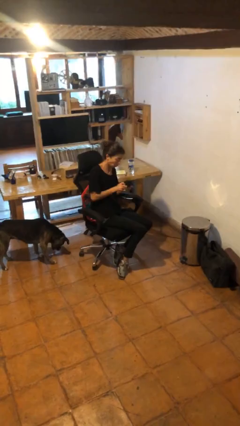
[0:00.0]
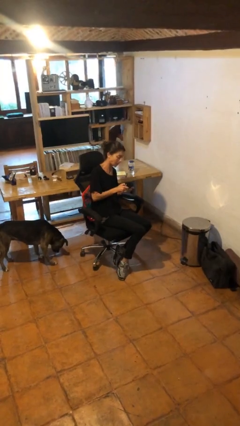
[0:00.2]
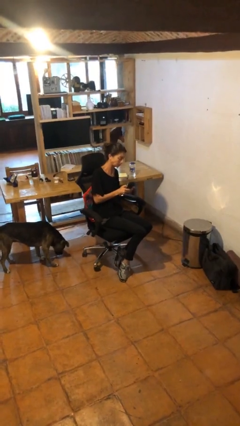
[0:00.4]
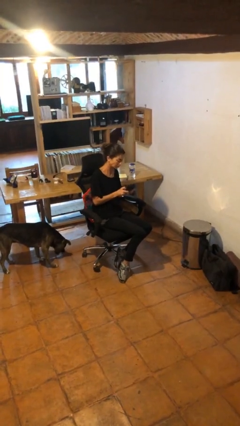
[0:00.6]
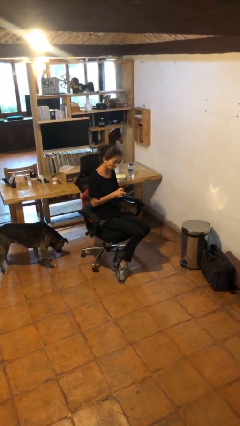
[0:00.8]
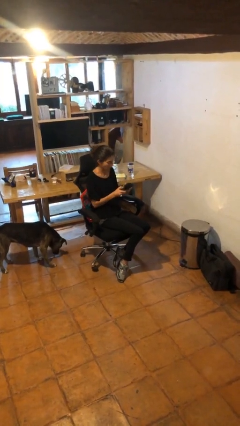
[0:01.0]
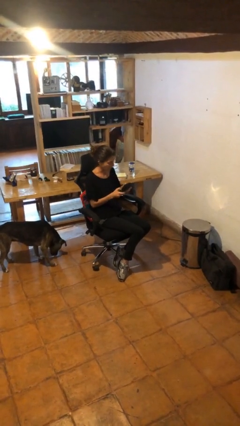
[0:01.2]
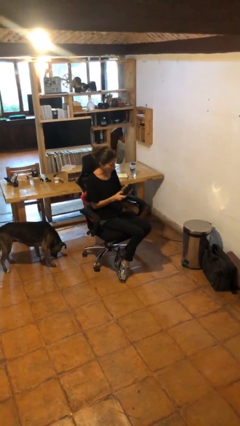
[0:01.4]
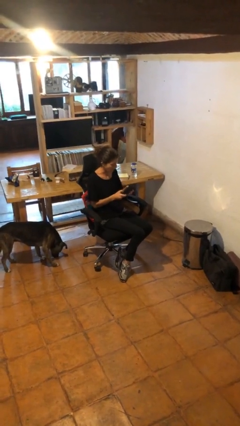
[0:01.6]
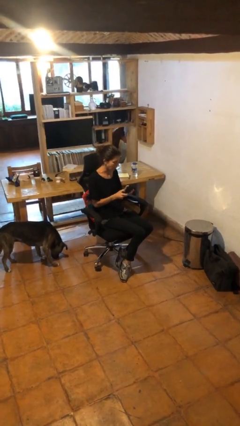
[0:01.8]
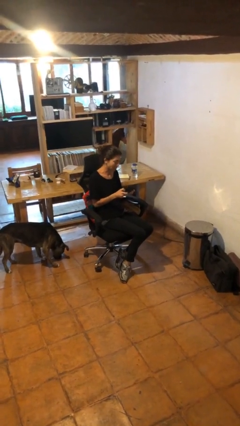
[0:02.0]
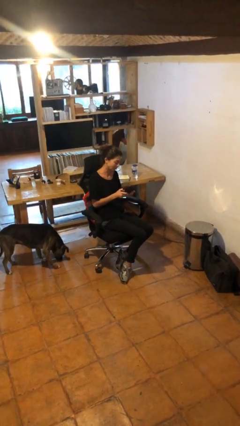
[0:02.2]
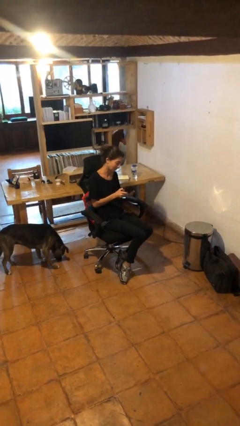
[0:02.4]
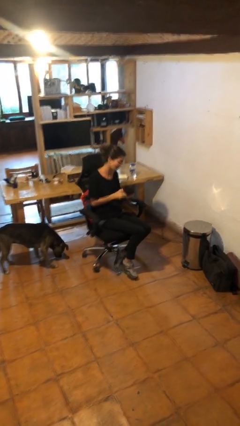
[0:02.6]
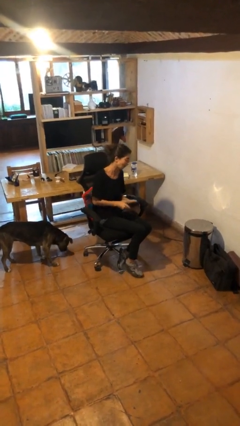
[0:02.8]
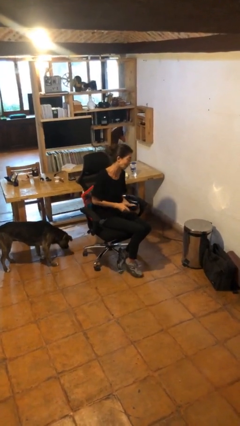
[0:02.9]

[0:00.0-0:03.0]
person interacts with handheld game

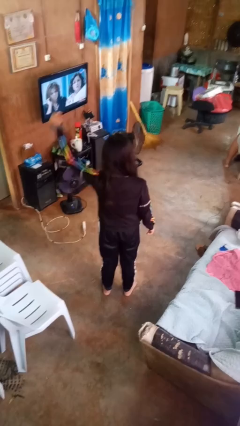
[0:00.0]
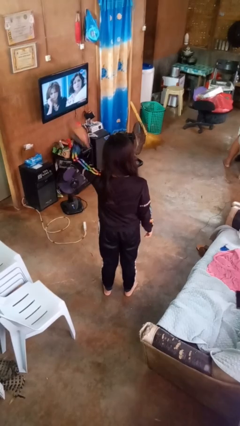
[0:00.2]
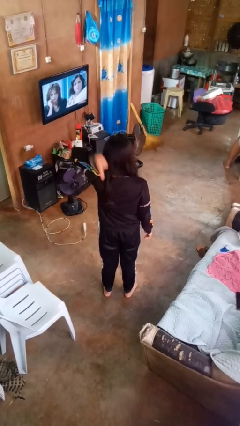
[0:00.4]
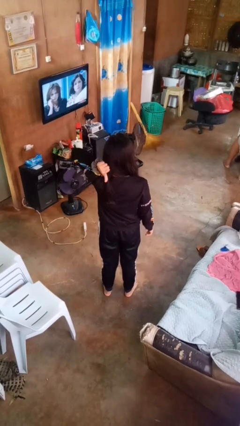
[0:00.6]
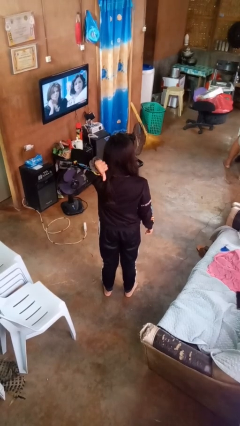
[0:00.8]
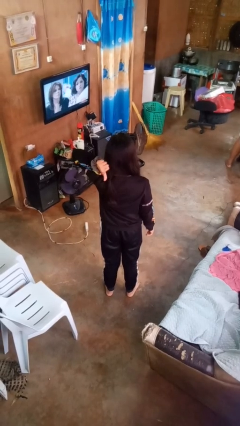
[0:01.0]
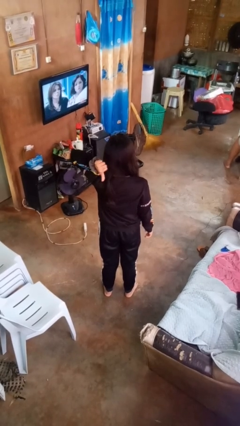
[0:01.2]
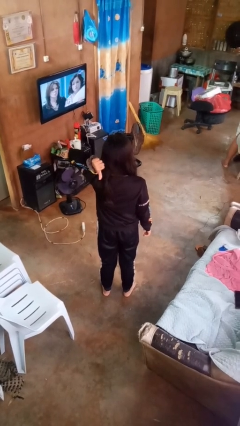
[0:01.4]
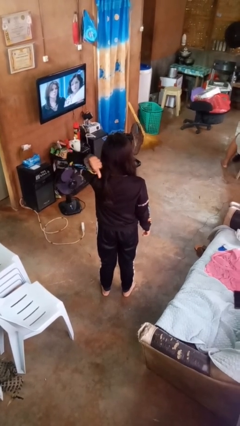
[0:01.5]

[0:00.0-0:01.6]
person gestures behind me

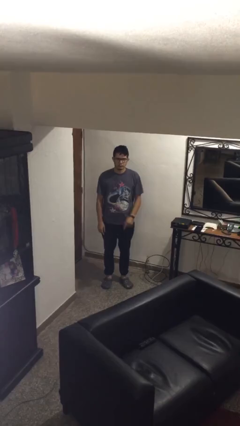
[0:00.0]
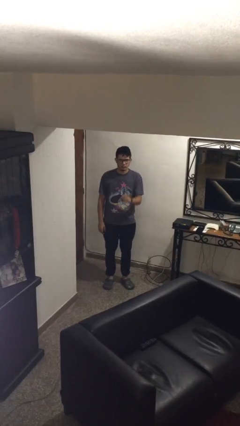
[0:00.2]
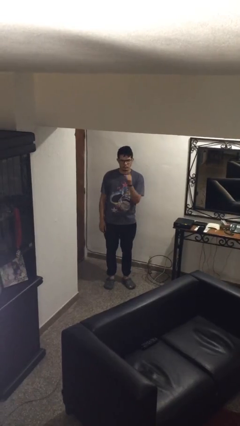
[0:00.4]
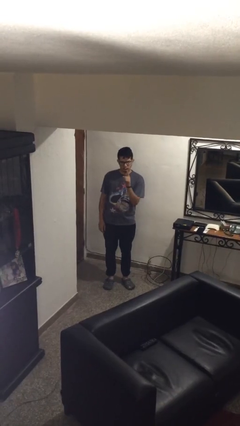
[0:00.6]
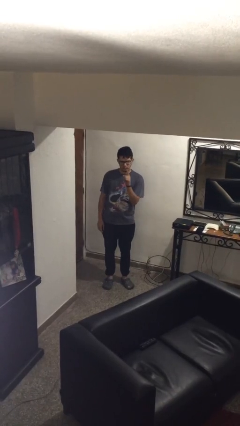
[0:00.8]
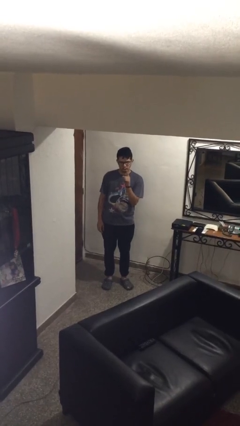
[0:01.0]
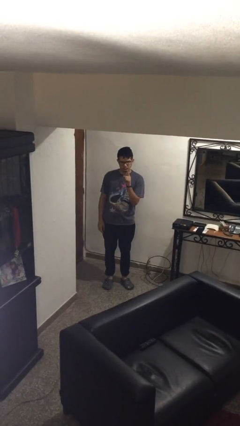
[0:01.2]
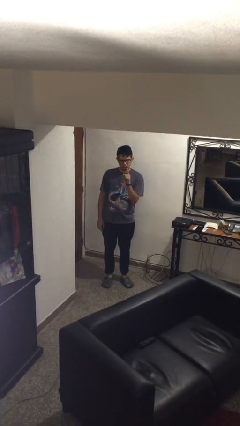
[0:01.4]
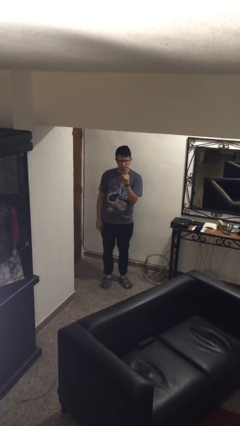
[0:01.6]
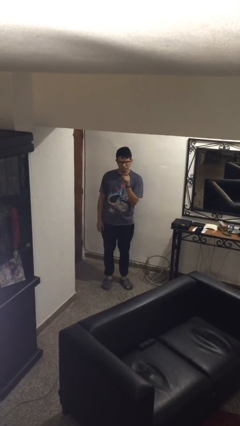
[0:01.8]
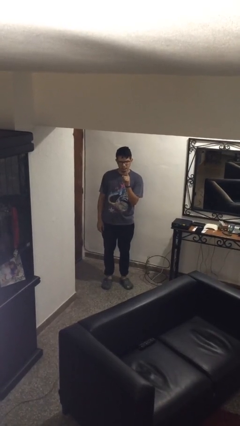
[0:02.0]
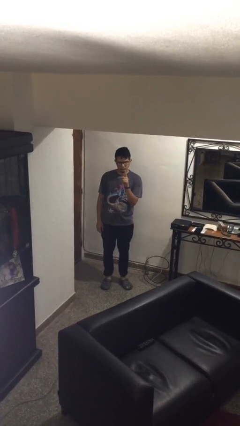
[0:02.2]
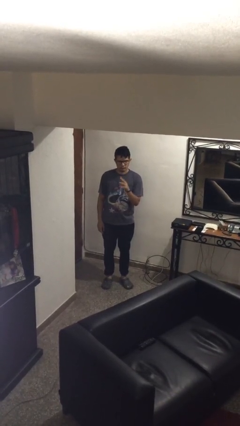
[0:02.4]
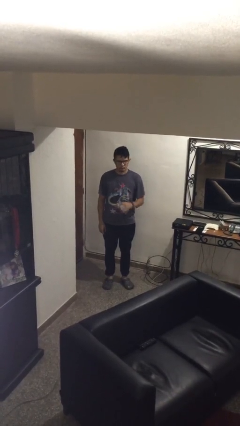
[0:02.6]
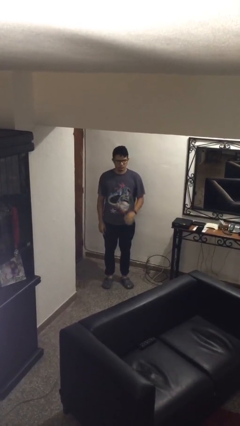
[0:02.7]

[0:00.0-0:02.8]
person gestures number one

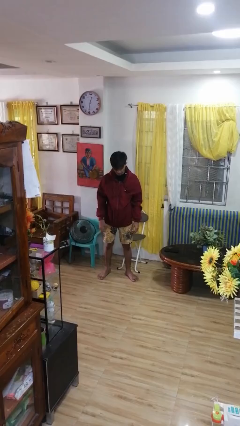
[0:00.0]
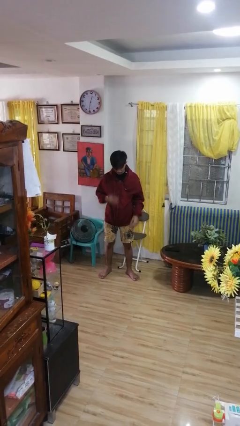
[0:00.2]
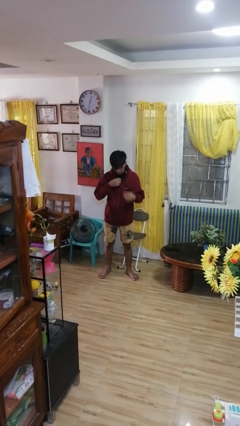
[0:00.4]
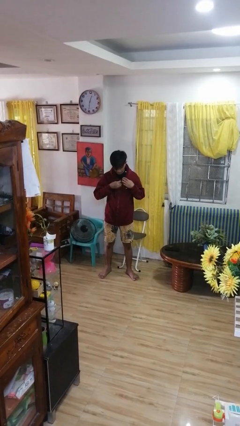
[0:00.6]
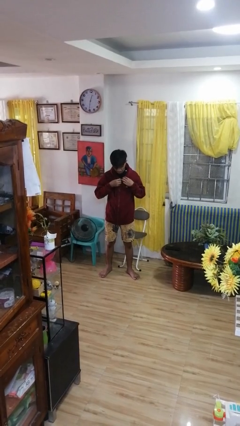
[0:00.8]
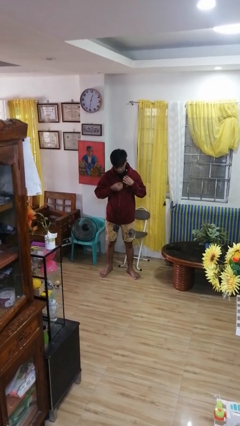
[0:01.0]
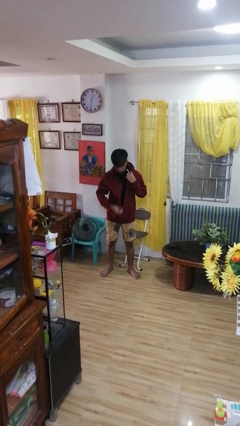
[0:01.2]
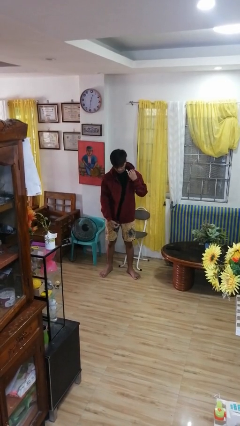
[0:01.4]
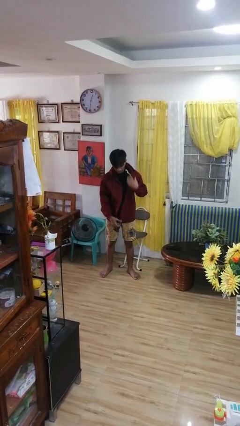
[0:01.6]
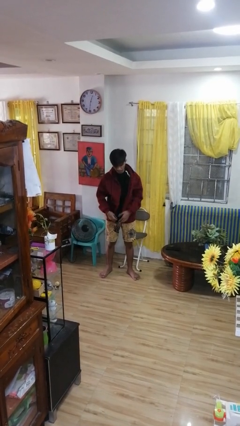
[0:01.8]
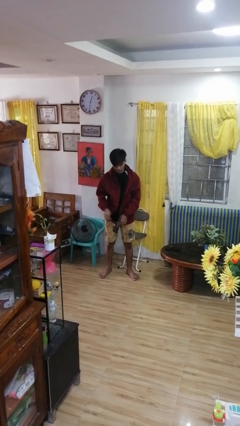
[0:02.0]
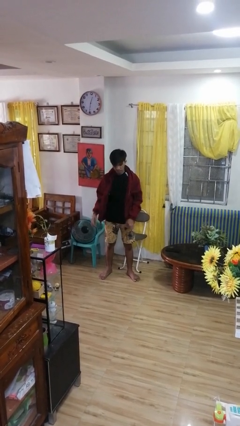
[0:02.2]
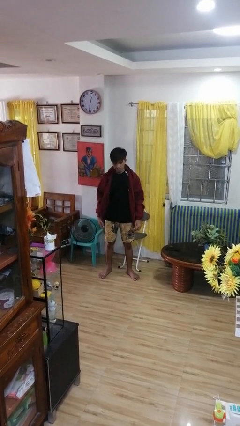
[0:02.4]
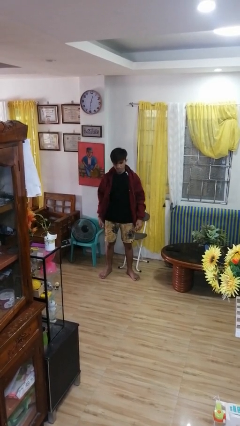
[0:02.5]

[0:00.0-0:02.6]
person unzips jacket

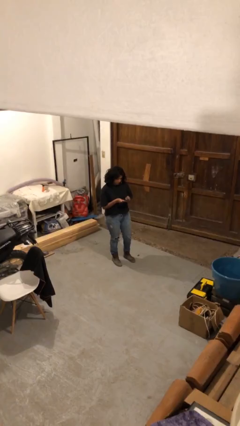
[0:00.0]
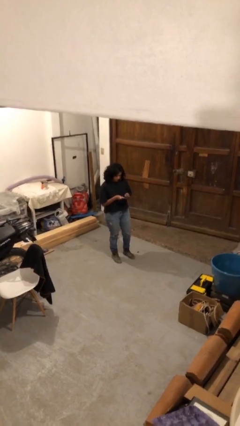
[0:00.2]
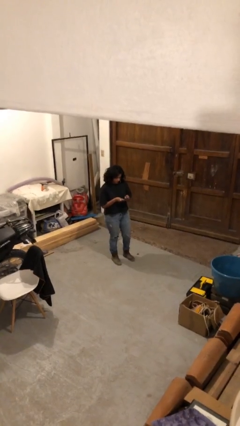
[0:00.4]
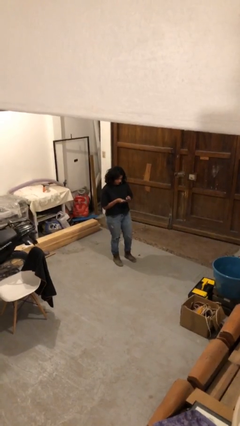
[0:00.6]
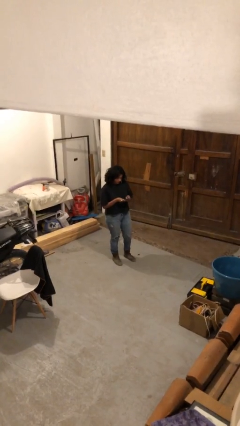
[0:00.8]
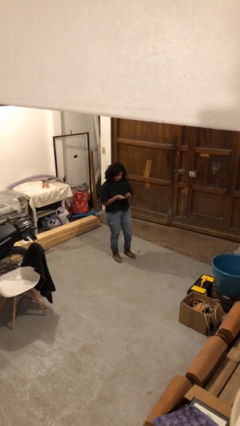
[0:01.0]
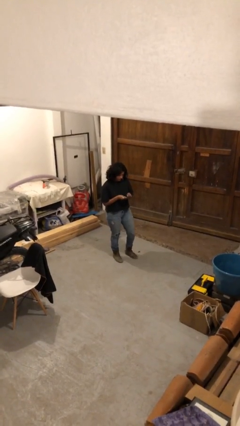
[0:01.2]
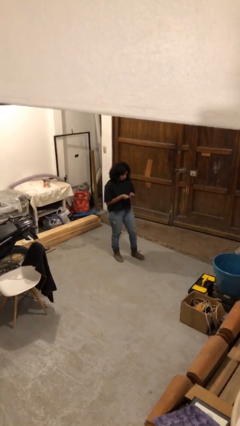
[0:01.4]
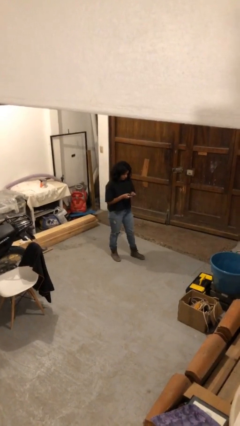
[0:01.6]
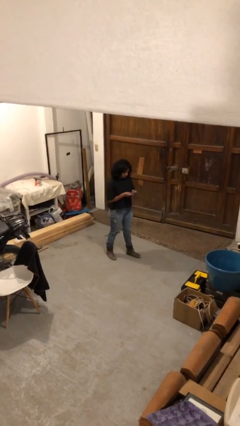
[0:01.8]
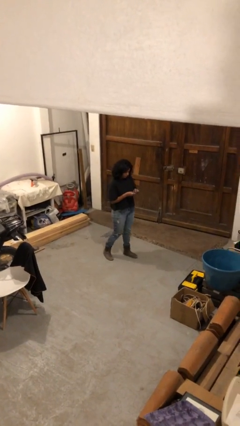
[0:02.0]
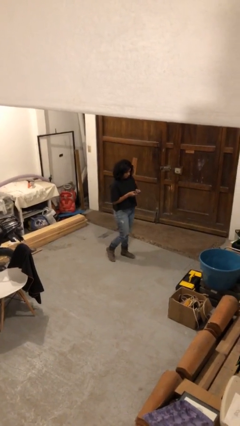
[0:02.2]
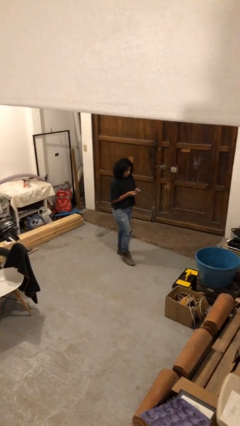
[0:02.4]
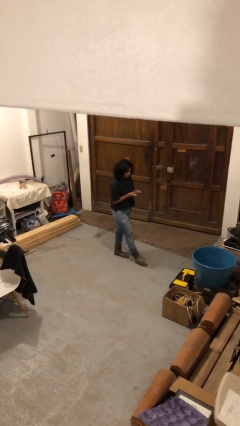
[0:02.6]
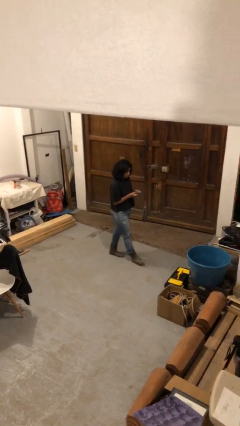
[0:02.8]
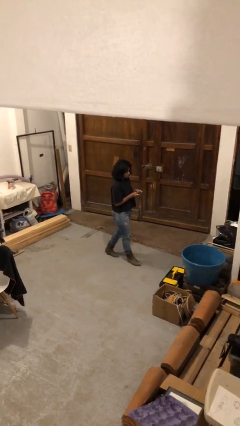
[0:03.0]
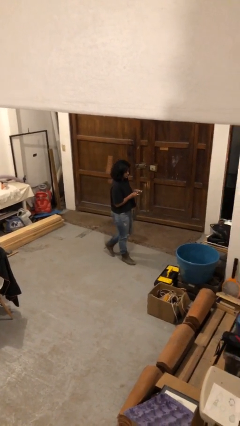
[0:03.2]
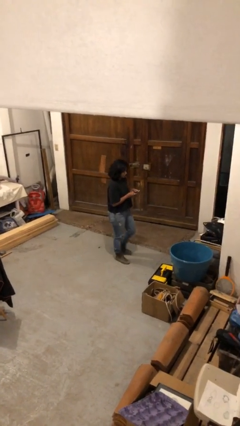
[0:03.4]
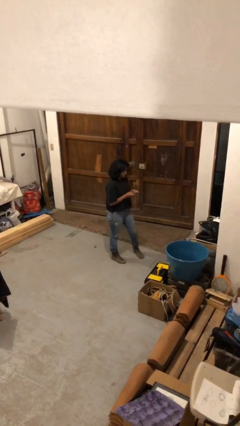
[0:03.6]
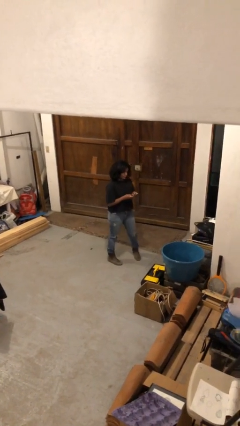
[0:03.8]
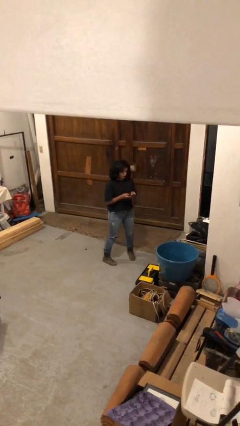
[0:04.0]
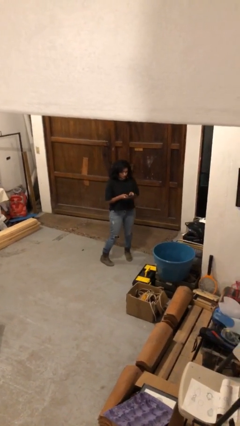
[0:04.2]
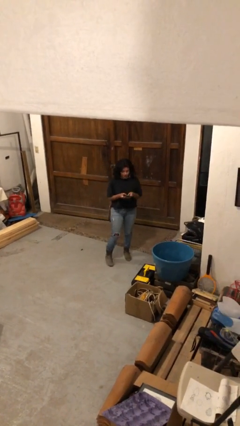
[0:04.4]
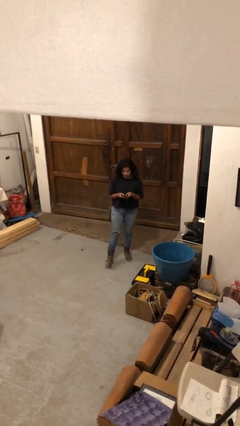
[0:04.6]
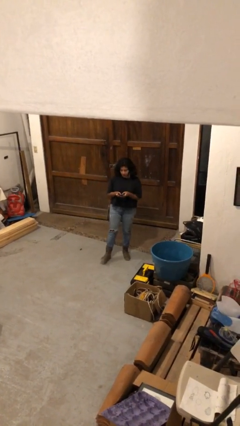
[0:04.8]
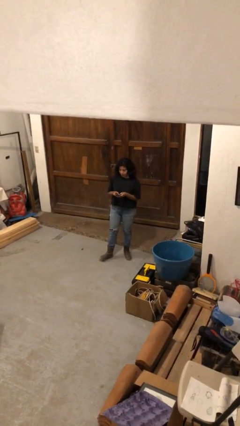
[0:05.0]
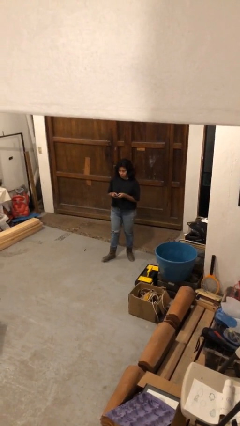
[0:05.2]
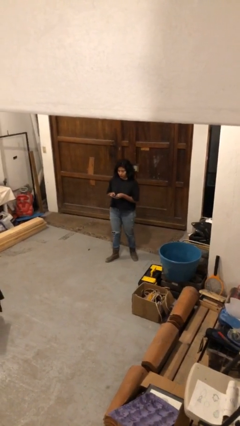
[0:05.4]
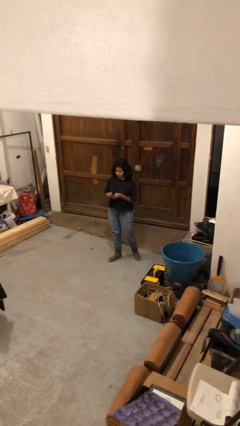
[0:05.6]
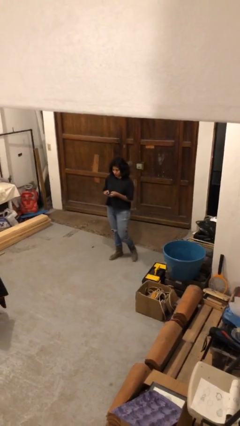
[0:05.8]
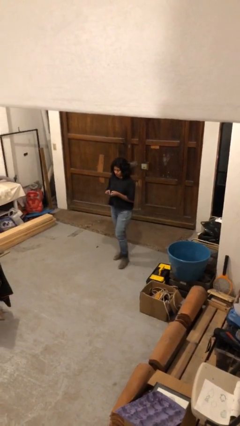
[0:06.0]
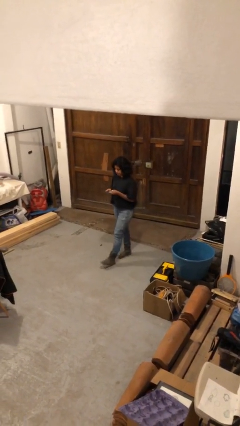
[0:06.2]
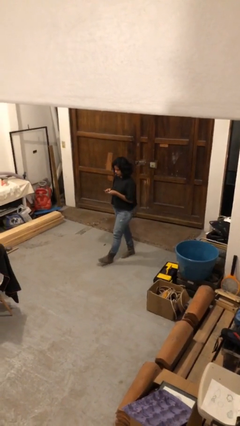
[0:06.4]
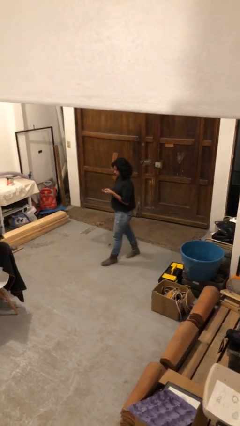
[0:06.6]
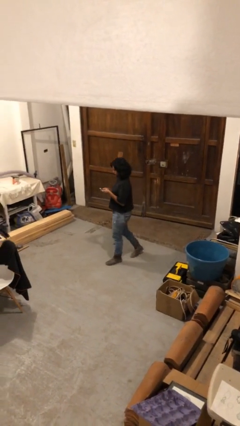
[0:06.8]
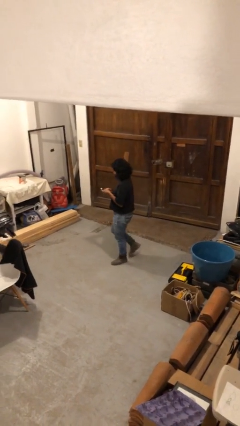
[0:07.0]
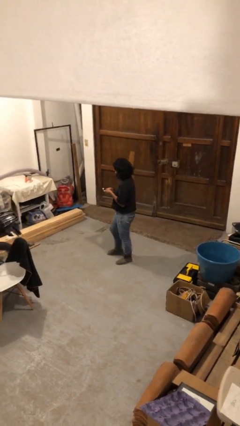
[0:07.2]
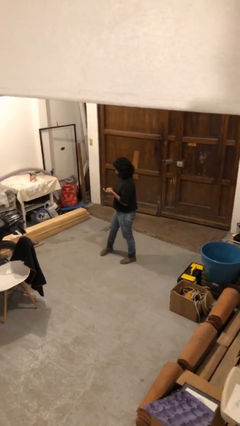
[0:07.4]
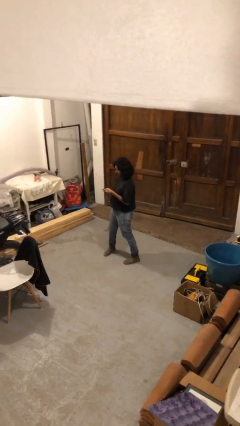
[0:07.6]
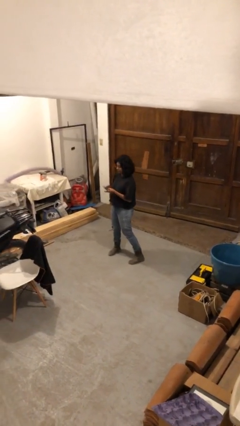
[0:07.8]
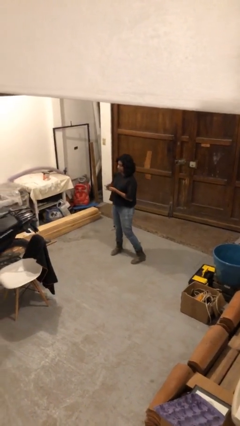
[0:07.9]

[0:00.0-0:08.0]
person texts on phone
